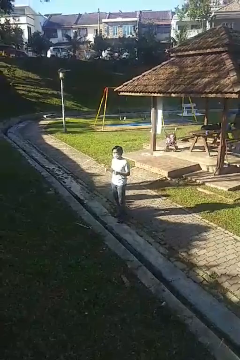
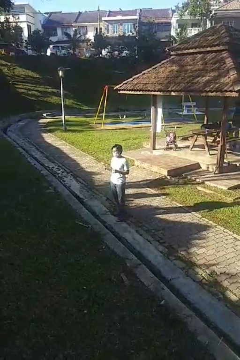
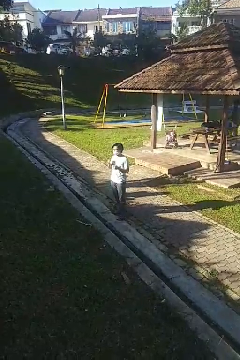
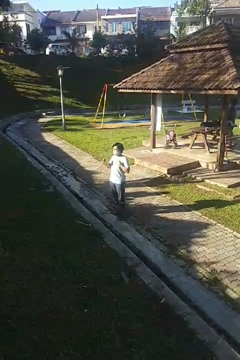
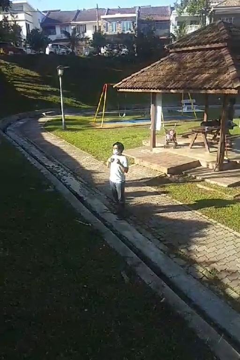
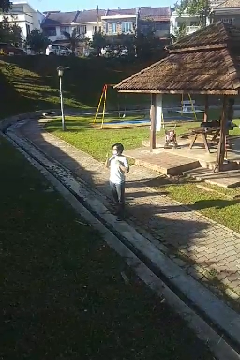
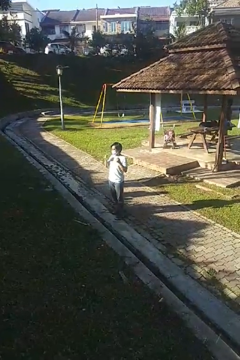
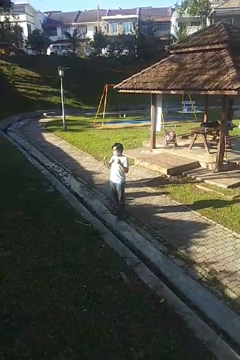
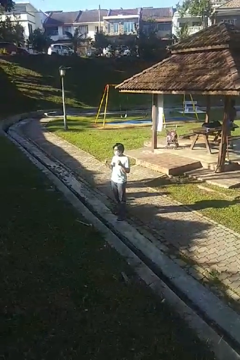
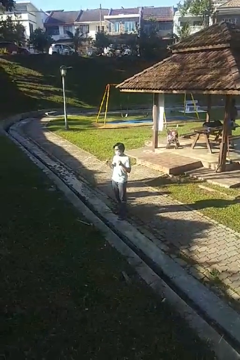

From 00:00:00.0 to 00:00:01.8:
person drums on chest

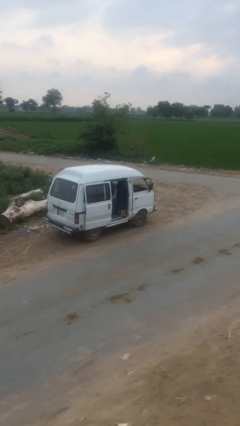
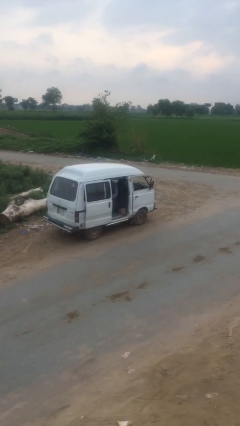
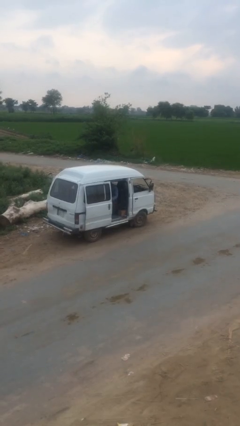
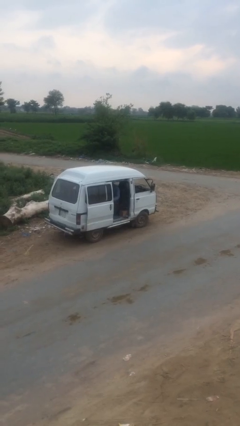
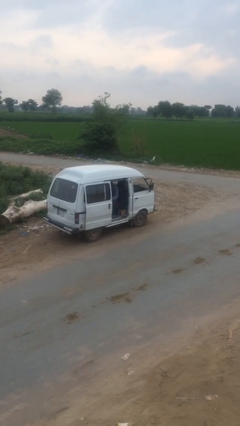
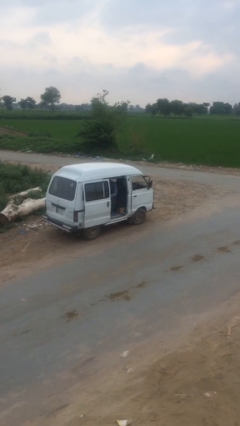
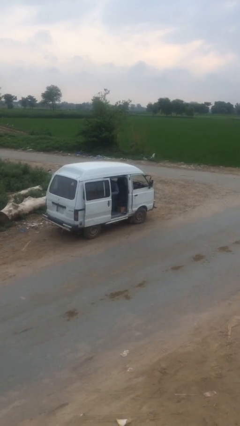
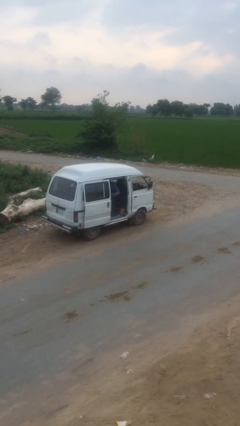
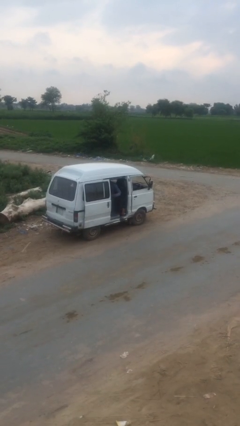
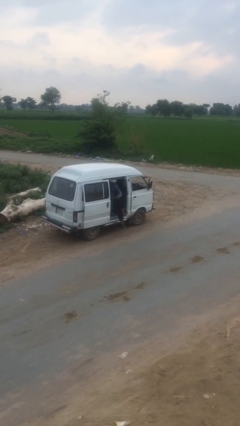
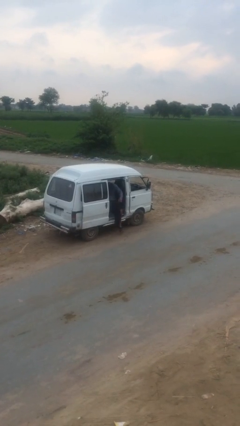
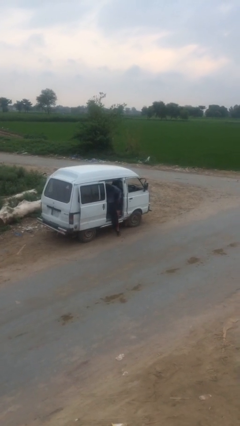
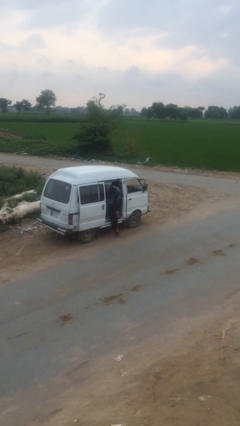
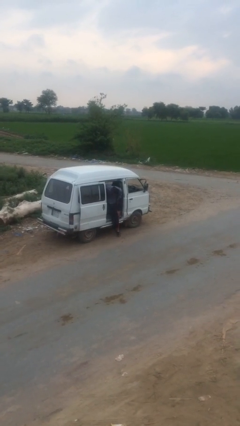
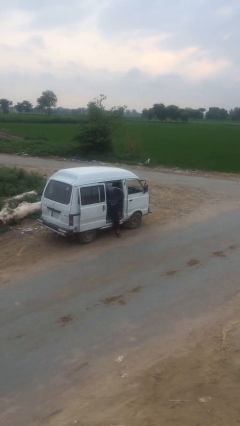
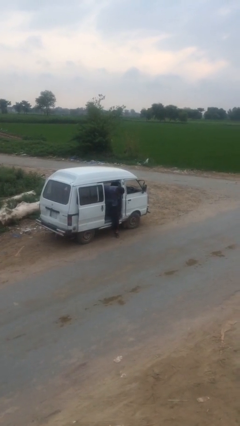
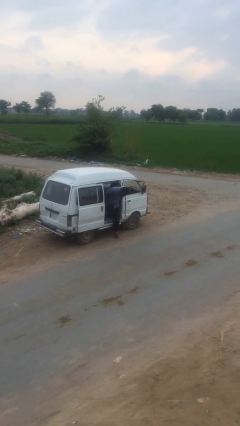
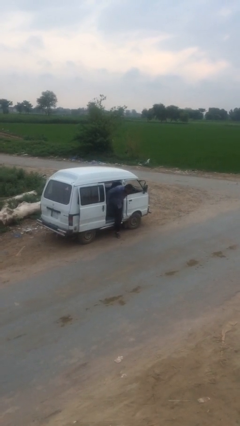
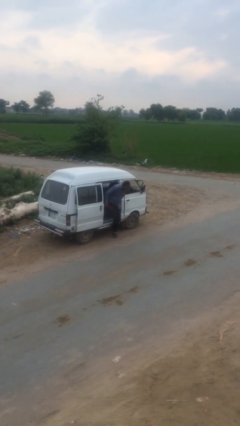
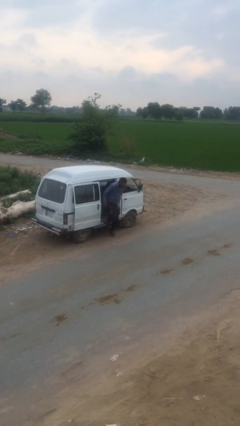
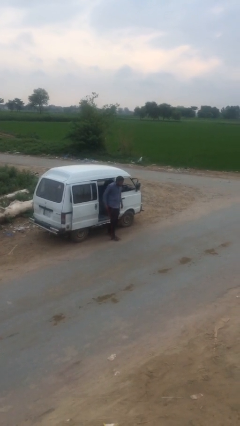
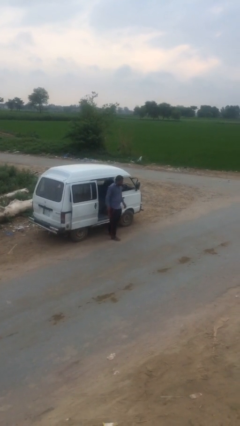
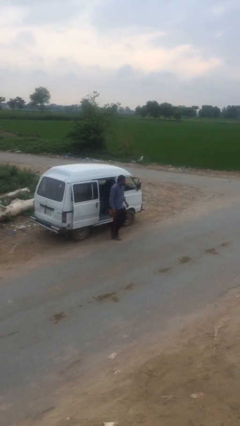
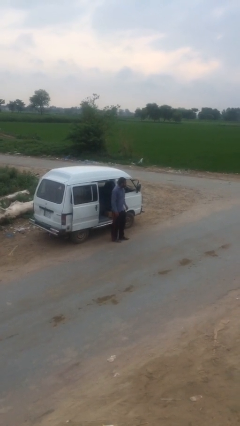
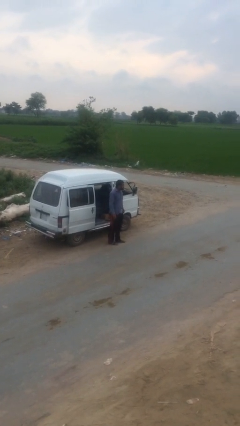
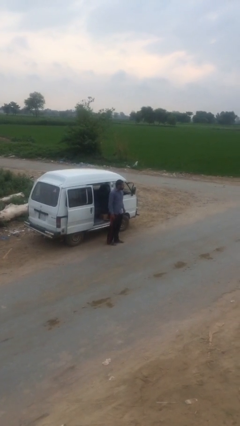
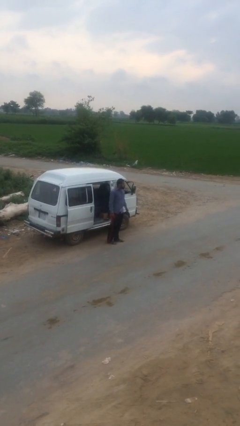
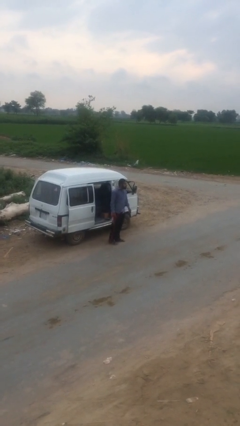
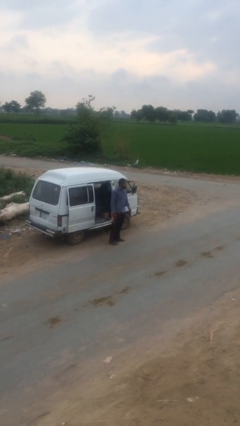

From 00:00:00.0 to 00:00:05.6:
person exits car

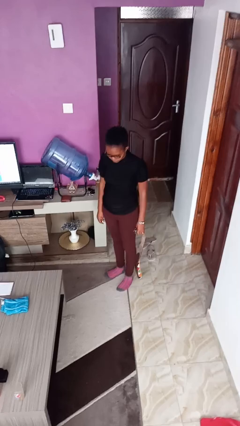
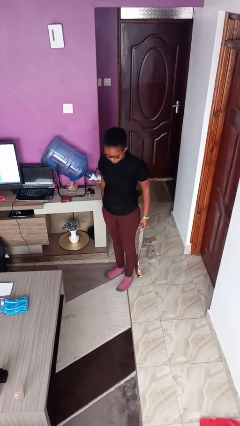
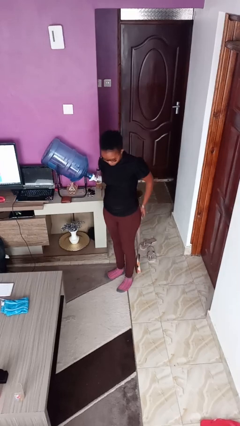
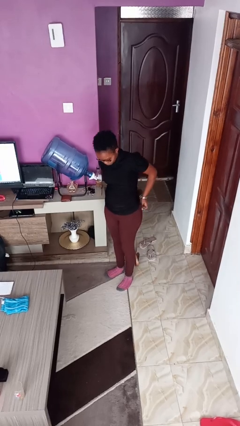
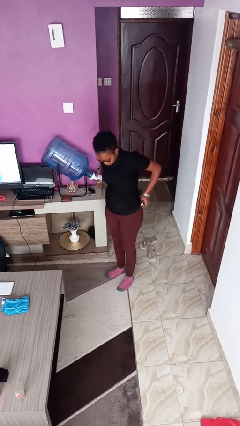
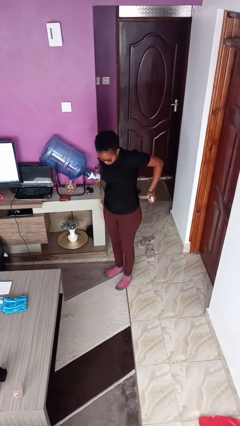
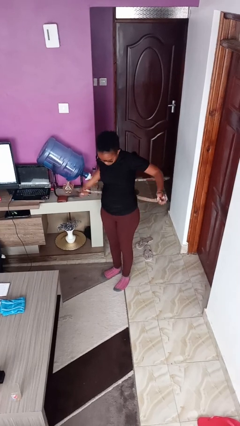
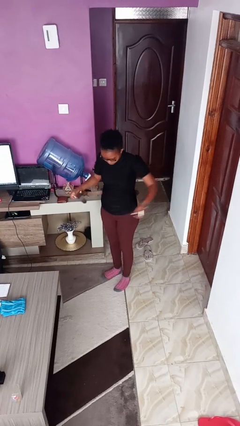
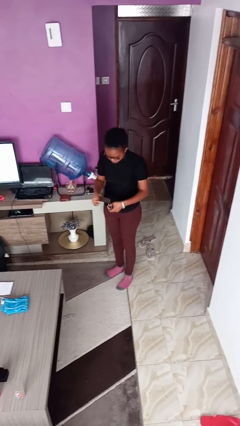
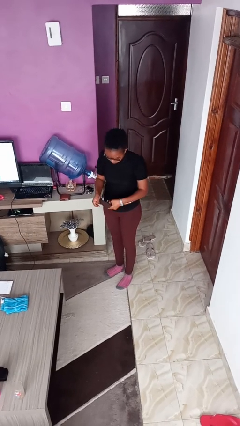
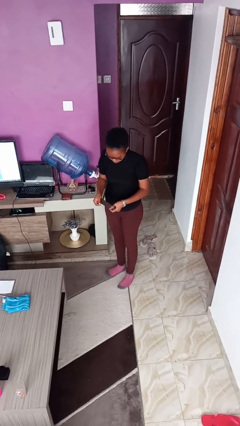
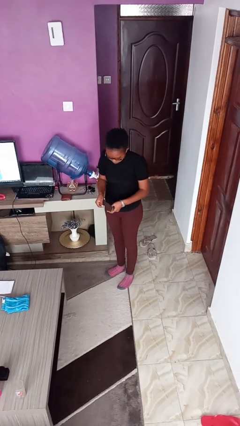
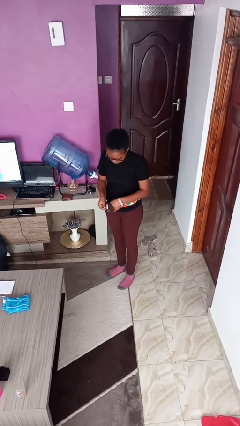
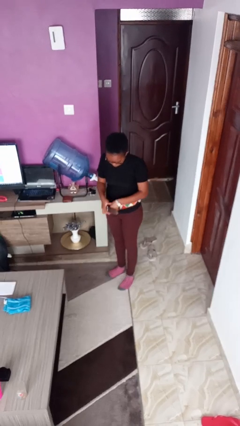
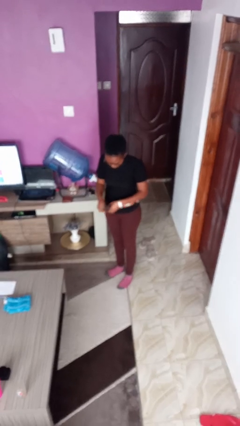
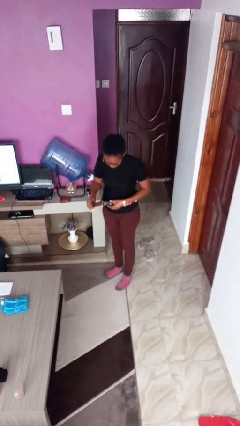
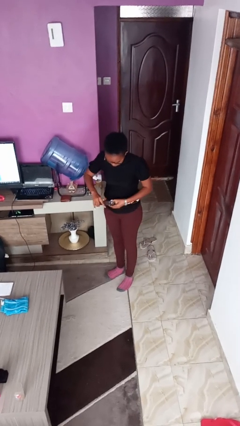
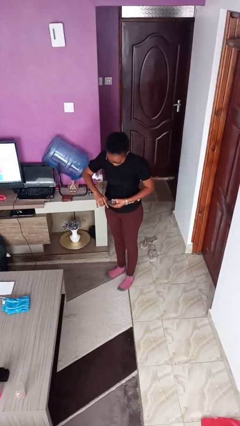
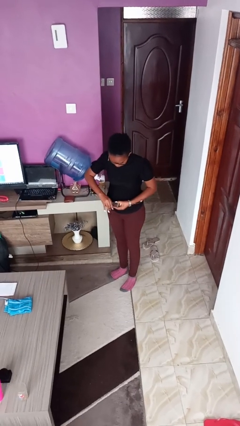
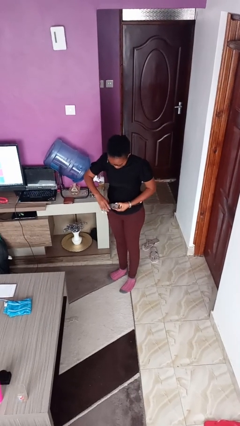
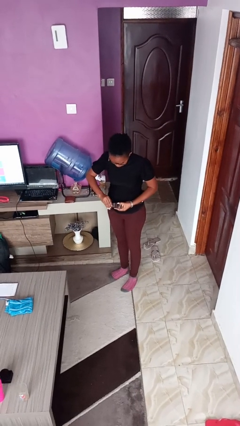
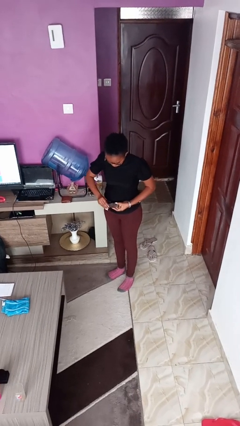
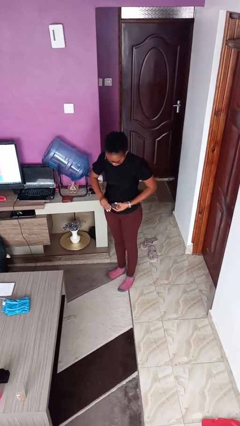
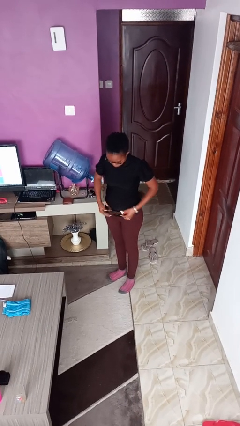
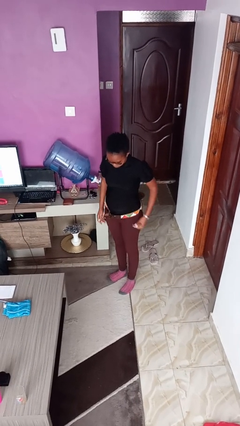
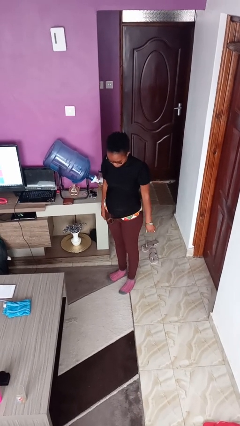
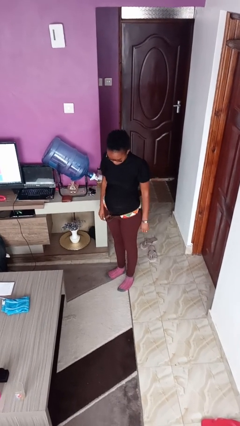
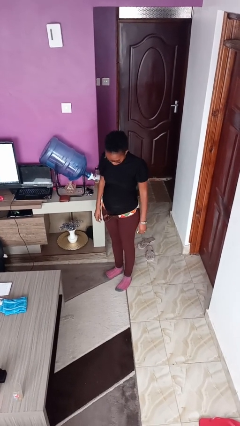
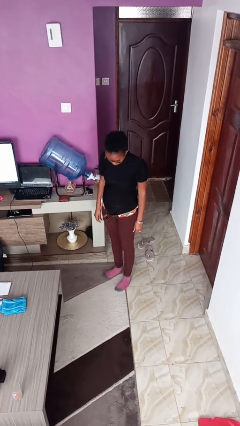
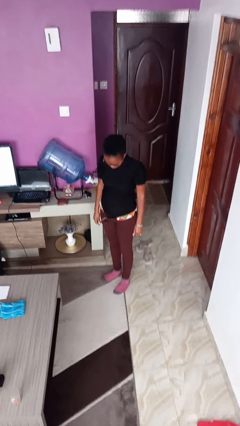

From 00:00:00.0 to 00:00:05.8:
person puts on belt

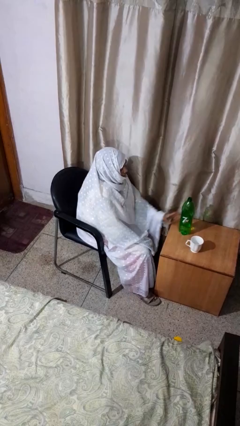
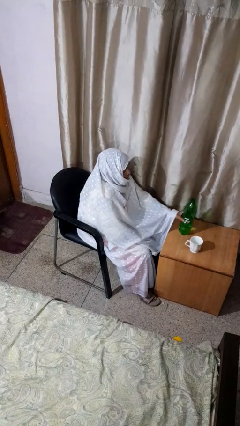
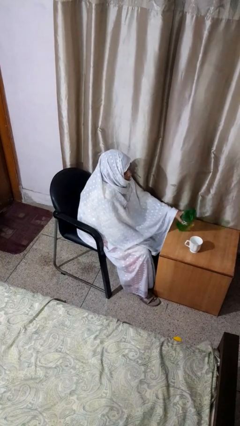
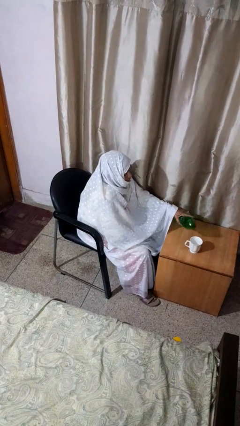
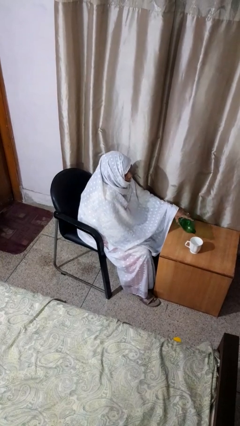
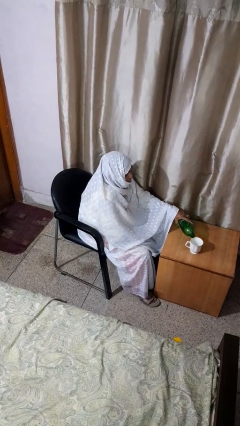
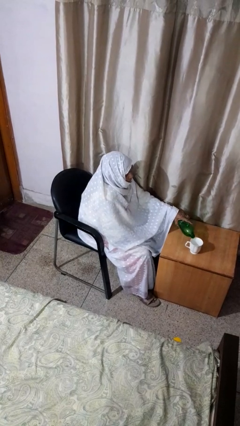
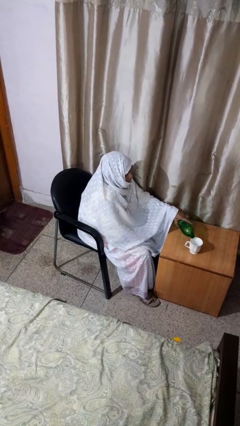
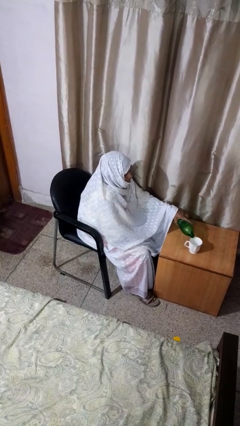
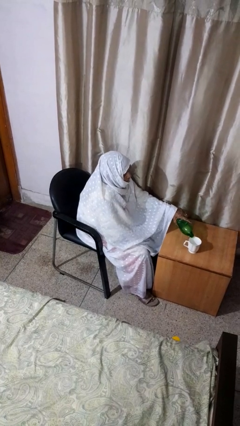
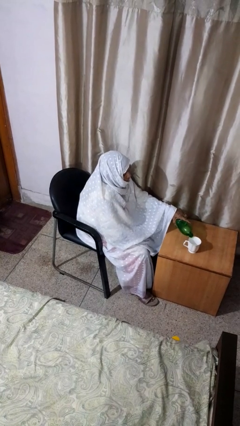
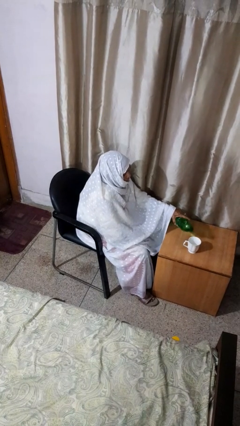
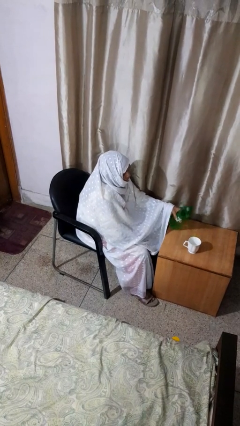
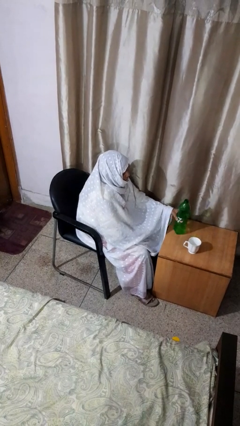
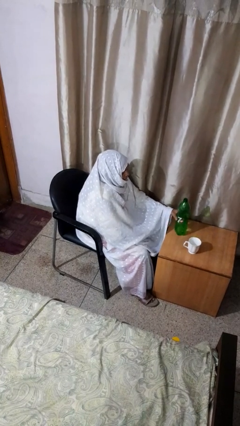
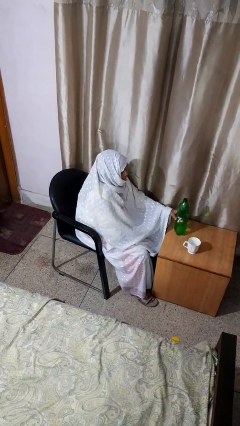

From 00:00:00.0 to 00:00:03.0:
person pours liquid into cup

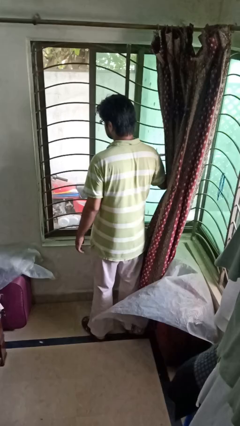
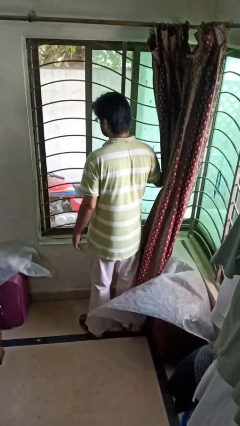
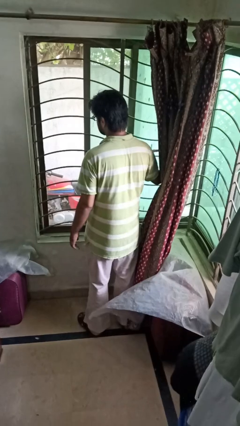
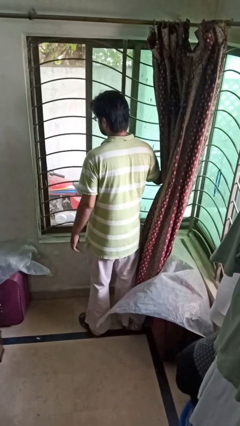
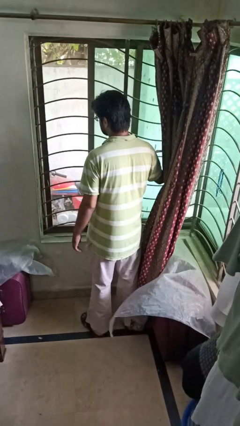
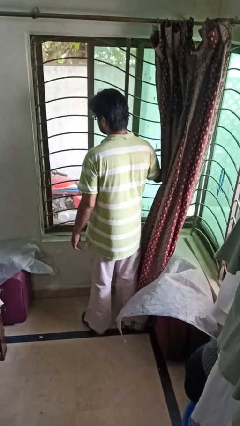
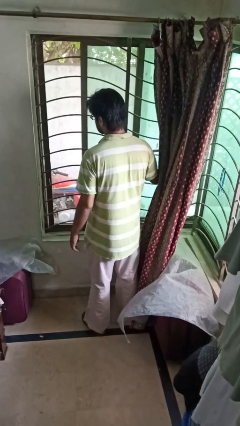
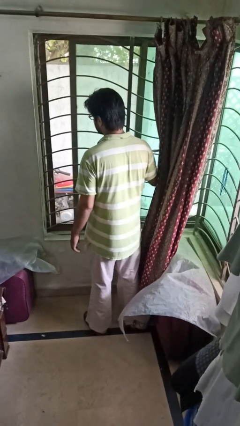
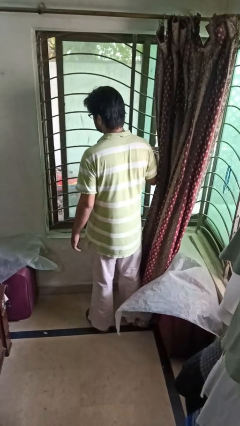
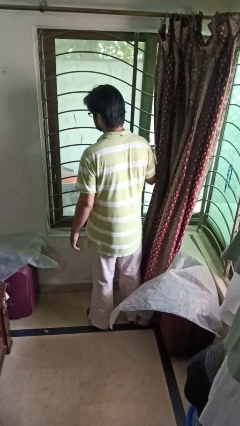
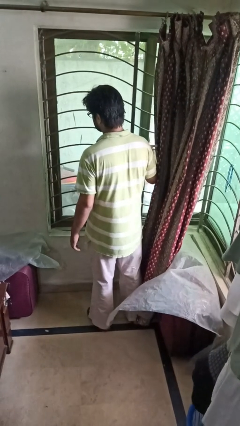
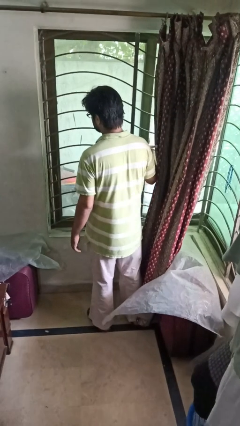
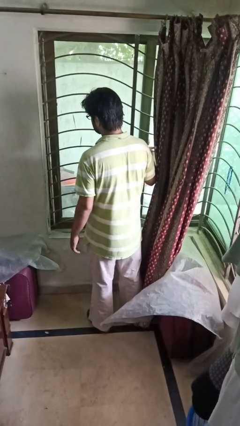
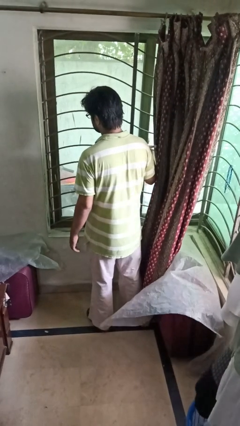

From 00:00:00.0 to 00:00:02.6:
person closes home window
